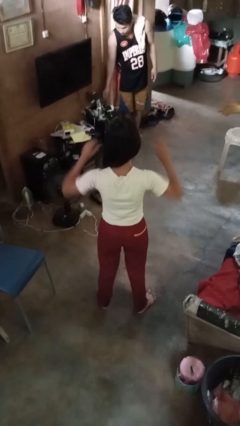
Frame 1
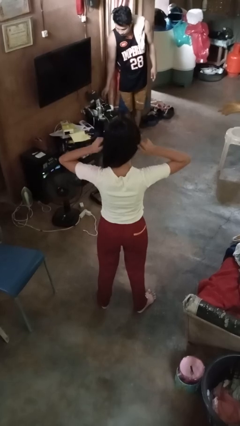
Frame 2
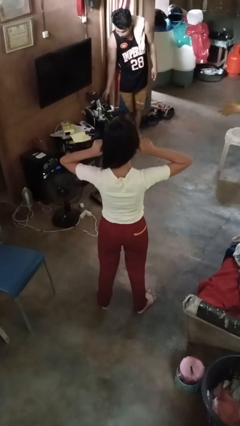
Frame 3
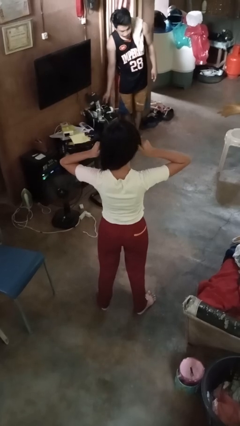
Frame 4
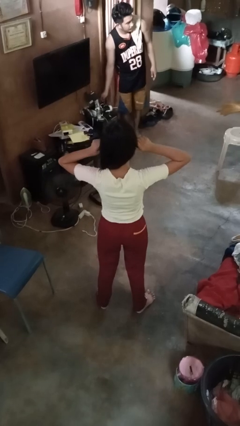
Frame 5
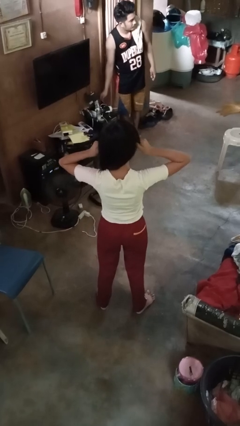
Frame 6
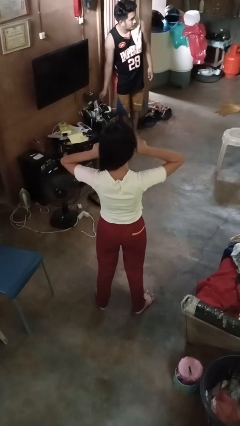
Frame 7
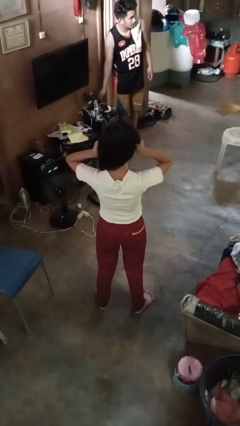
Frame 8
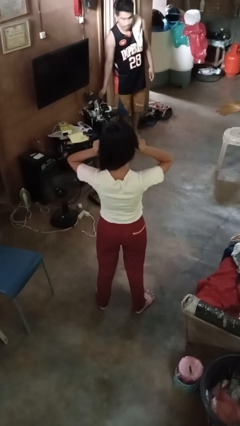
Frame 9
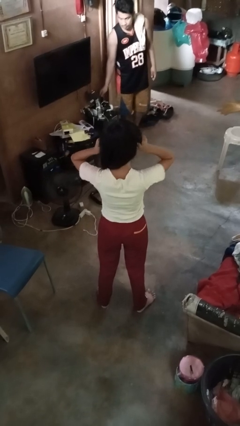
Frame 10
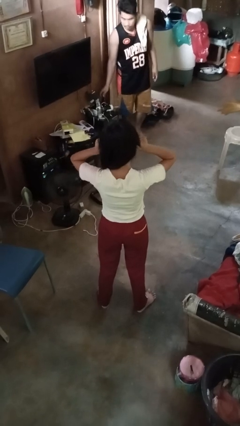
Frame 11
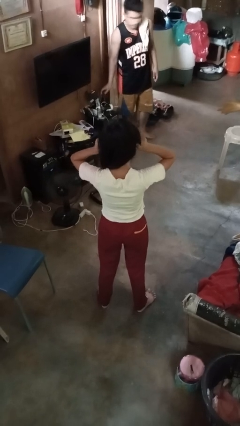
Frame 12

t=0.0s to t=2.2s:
person touches earlobe

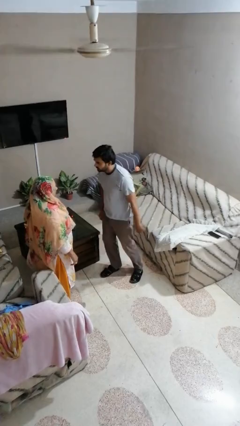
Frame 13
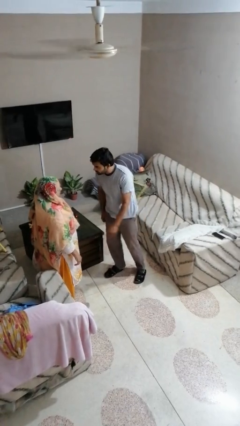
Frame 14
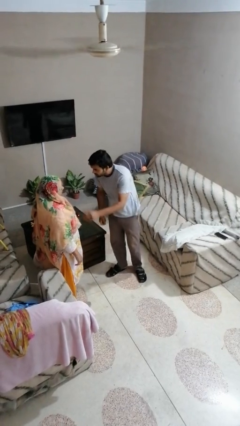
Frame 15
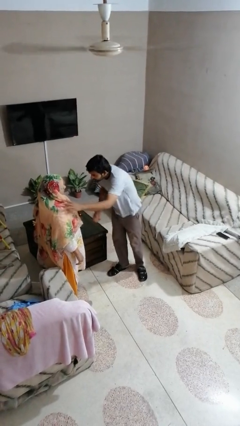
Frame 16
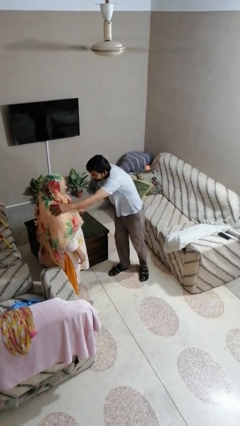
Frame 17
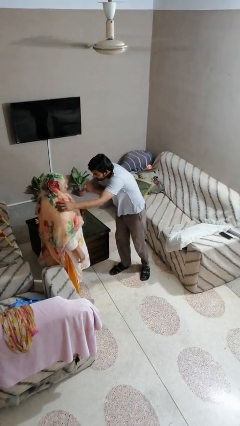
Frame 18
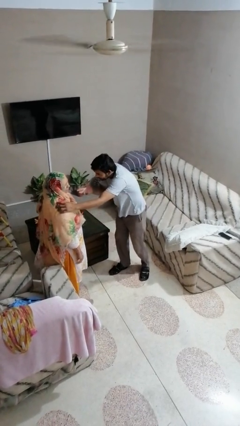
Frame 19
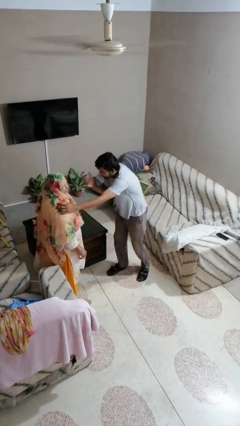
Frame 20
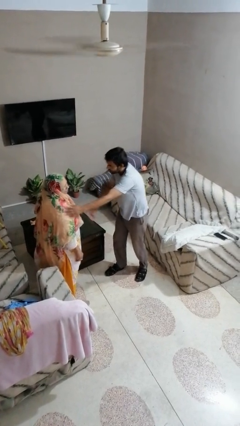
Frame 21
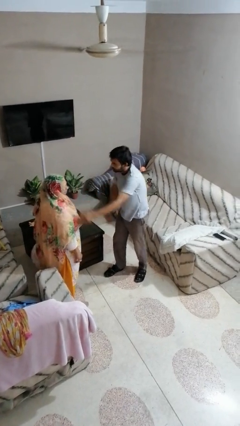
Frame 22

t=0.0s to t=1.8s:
person shoves person

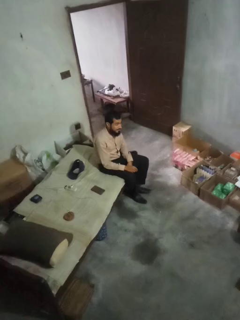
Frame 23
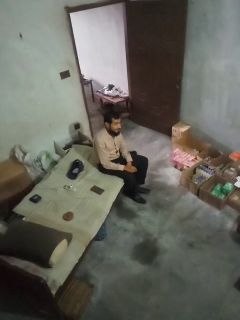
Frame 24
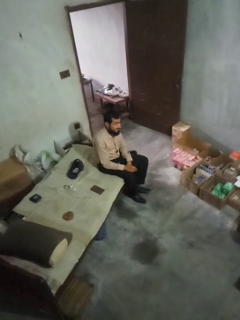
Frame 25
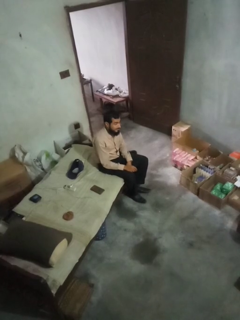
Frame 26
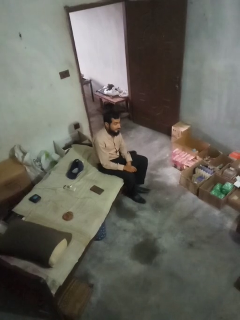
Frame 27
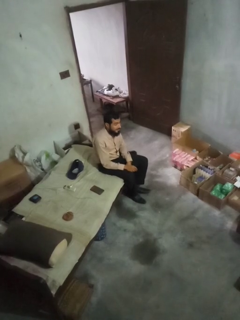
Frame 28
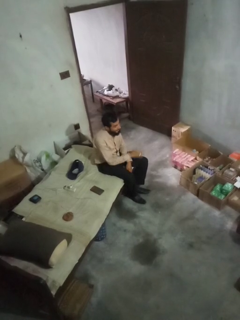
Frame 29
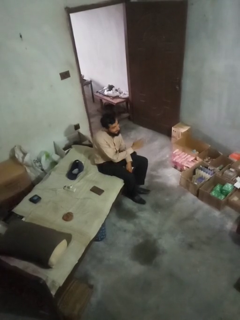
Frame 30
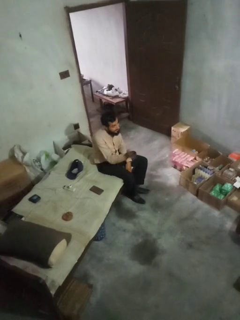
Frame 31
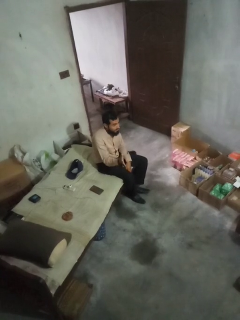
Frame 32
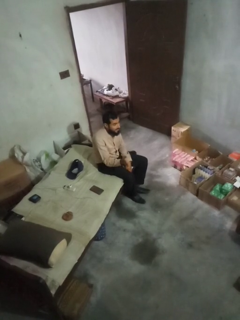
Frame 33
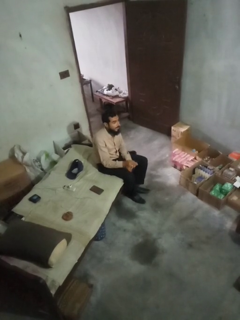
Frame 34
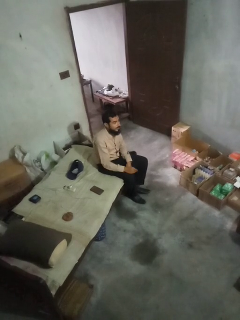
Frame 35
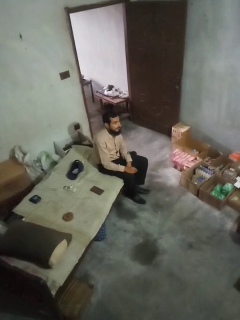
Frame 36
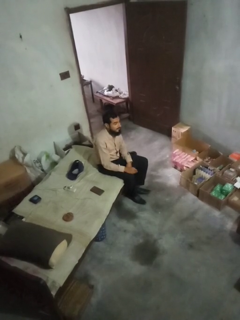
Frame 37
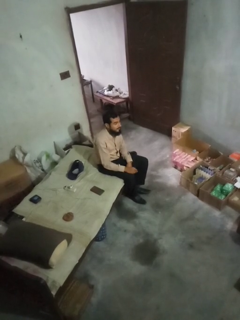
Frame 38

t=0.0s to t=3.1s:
person gestures swipe right

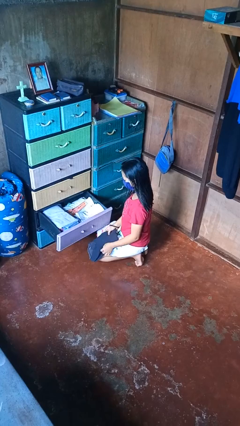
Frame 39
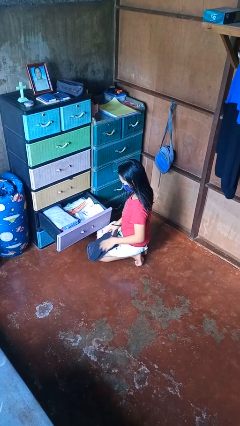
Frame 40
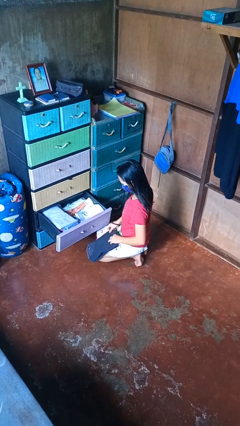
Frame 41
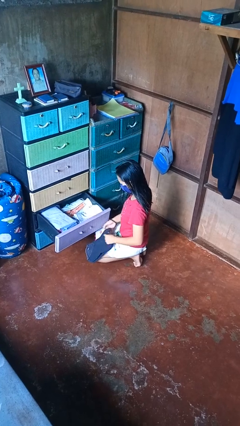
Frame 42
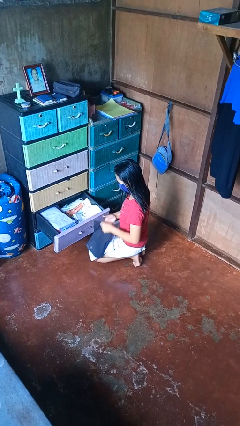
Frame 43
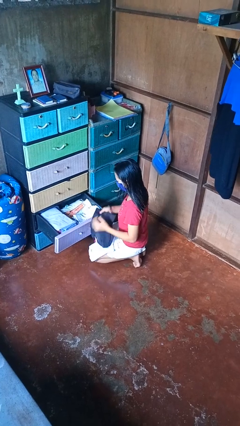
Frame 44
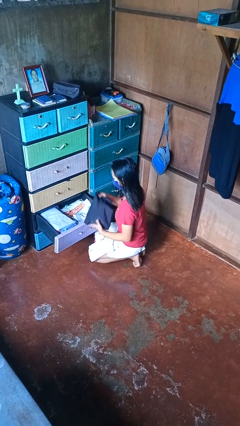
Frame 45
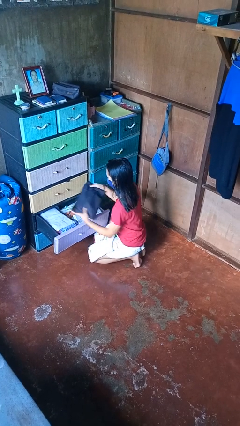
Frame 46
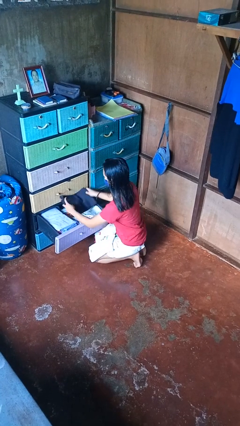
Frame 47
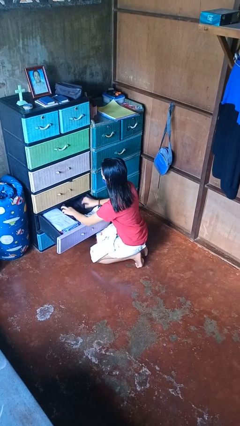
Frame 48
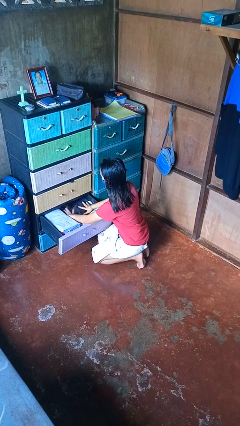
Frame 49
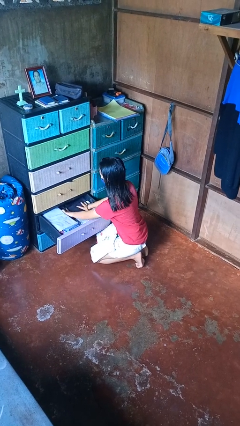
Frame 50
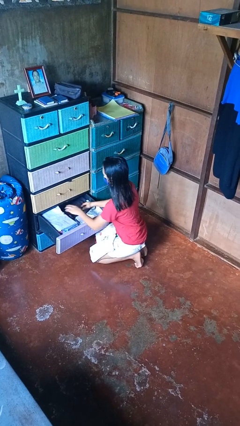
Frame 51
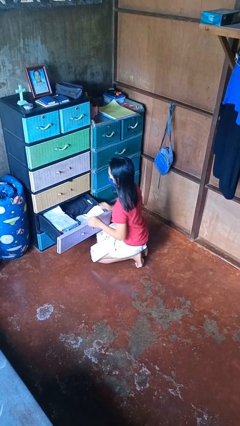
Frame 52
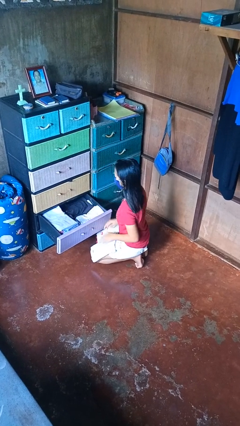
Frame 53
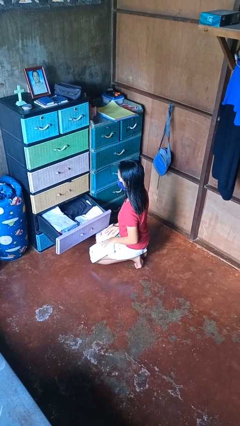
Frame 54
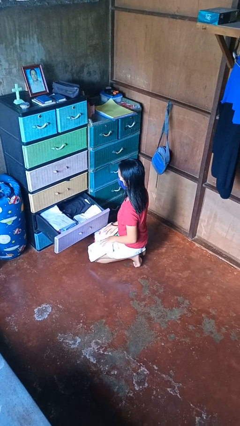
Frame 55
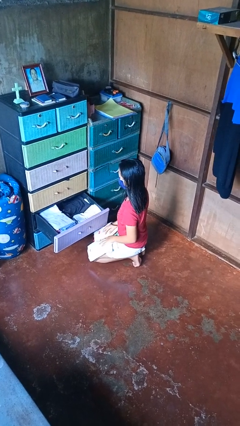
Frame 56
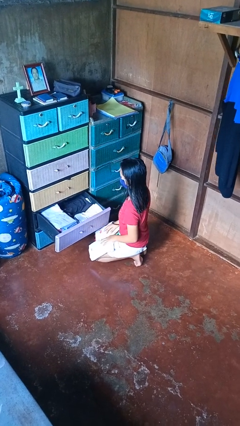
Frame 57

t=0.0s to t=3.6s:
person puts clothes into dresser

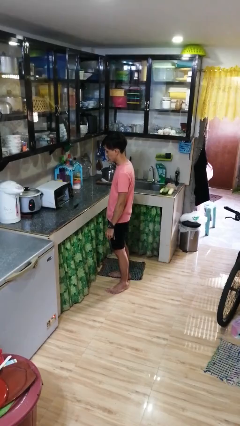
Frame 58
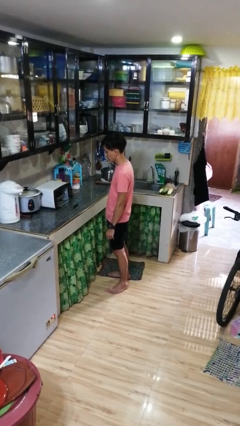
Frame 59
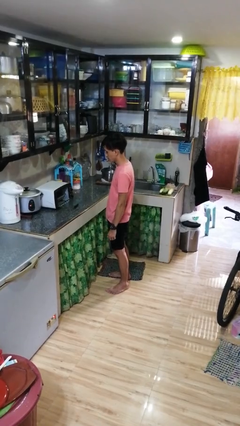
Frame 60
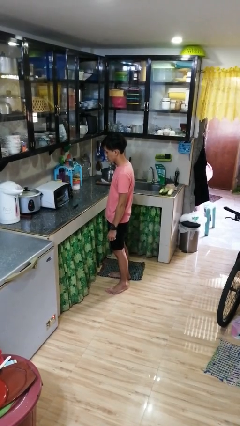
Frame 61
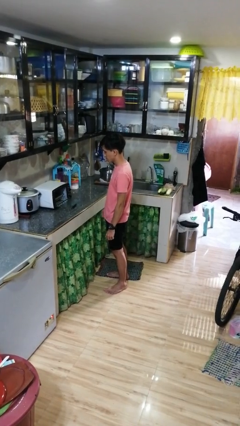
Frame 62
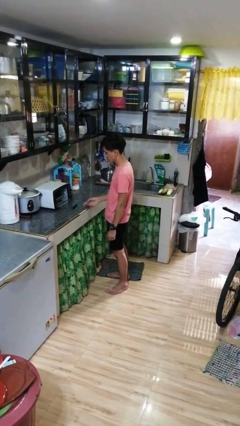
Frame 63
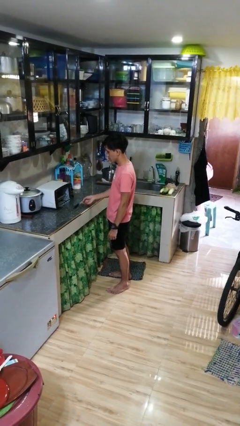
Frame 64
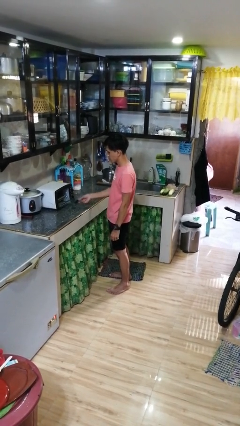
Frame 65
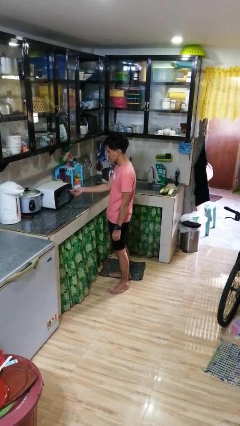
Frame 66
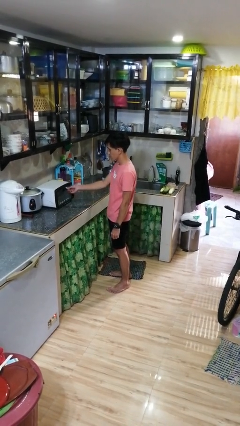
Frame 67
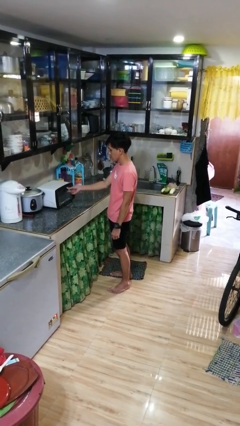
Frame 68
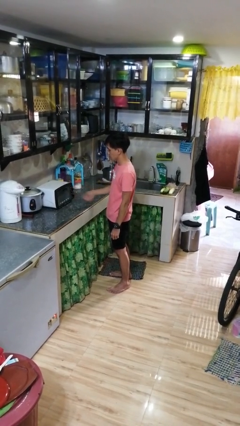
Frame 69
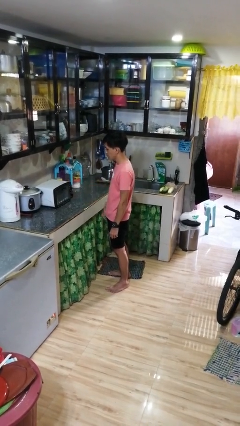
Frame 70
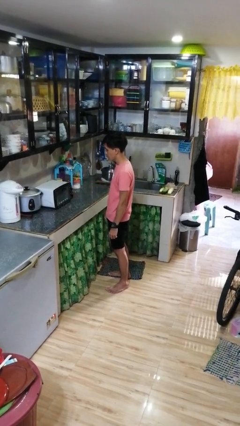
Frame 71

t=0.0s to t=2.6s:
person closes microwave

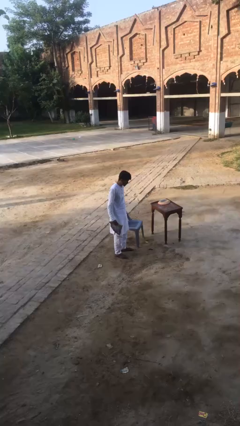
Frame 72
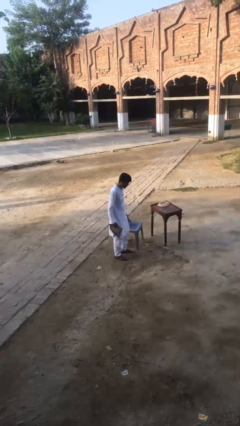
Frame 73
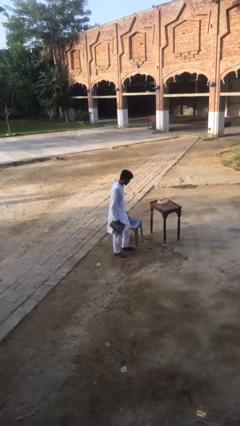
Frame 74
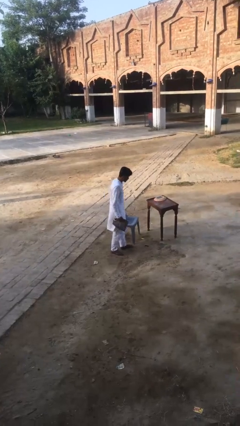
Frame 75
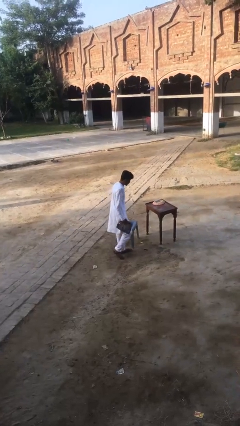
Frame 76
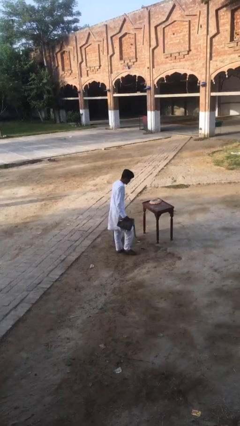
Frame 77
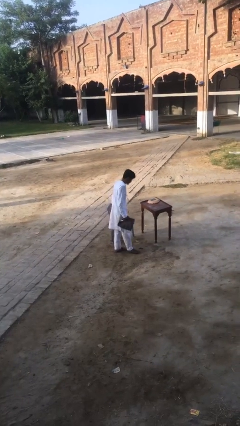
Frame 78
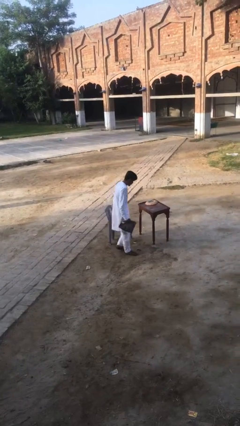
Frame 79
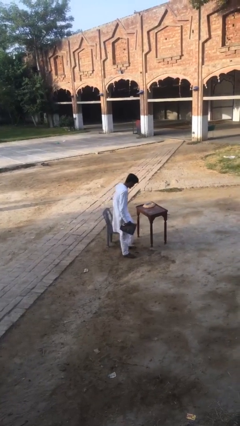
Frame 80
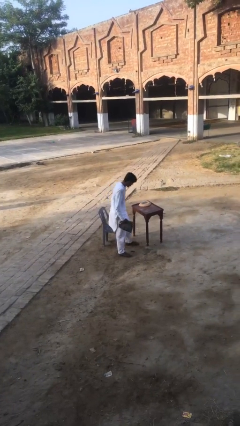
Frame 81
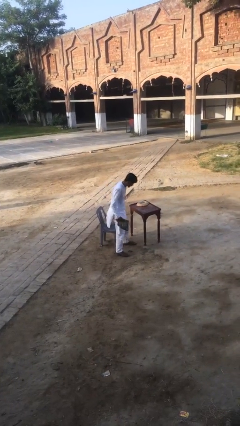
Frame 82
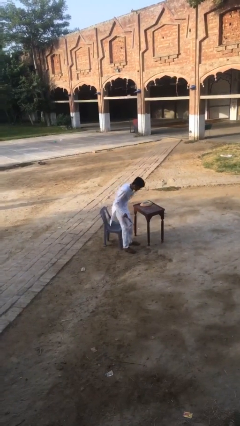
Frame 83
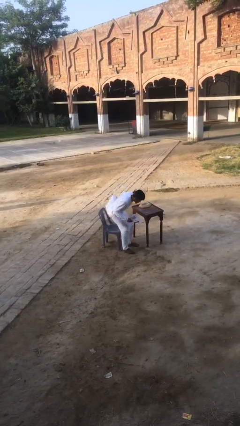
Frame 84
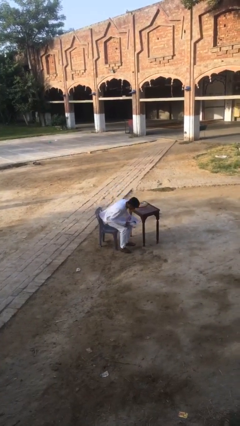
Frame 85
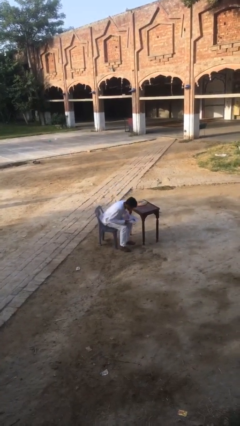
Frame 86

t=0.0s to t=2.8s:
person sits down

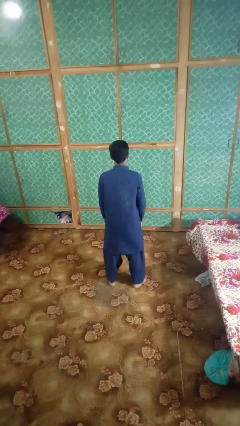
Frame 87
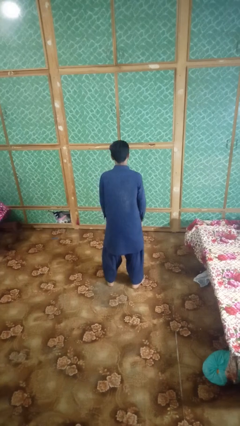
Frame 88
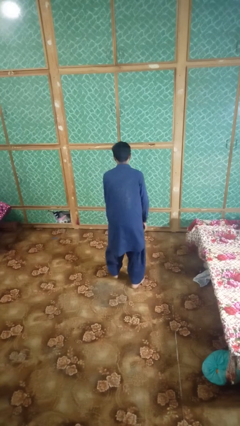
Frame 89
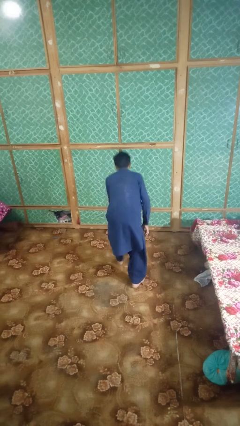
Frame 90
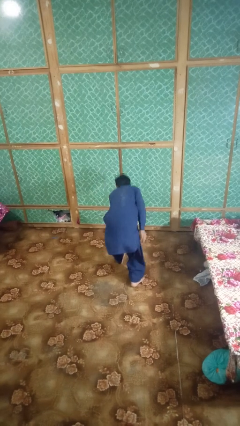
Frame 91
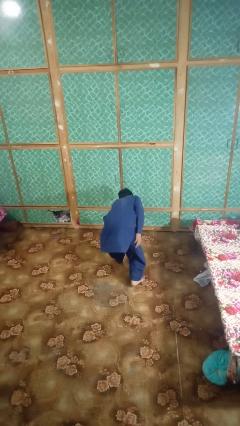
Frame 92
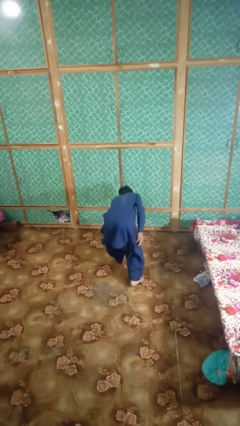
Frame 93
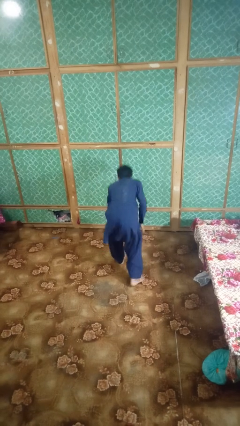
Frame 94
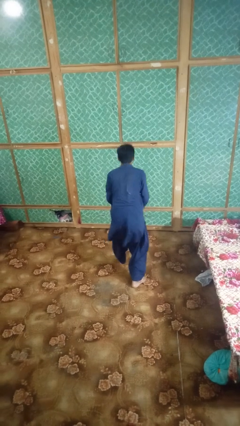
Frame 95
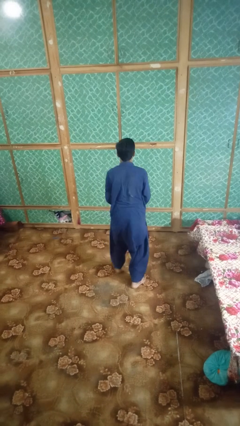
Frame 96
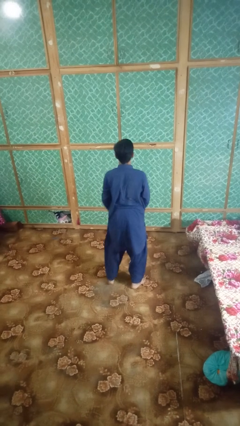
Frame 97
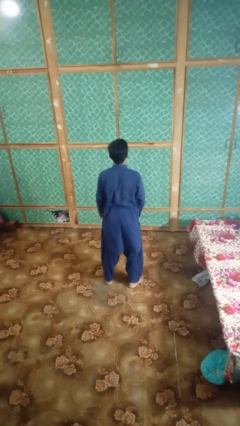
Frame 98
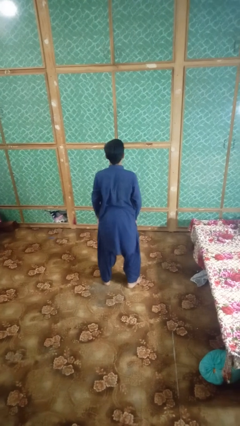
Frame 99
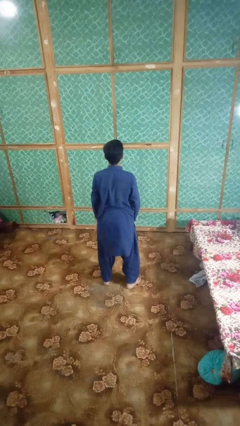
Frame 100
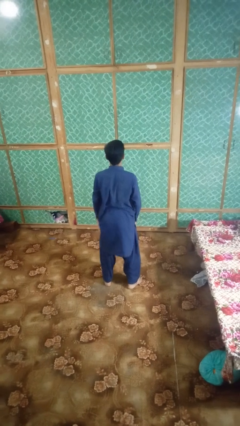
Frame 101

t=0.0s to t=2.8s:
person picks up object from floor
